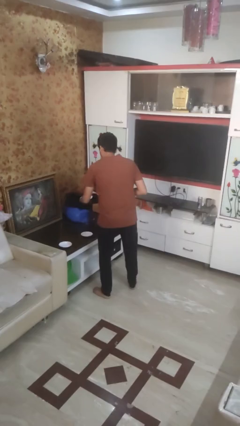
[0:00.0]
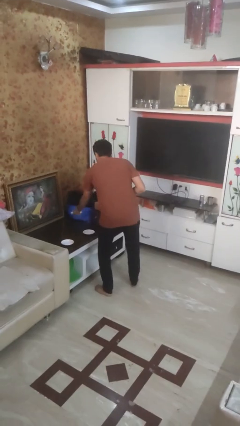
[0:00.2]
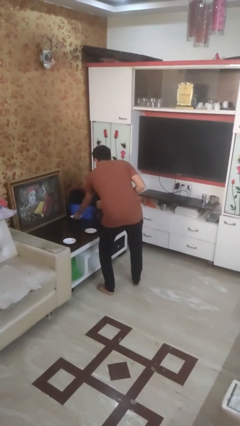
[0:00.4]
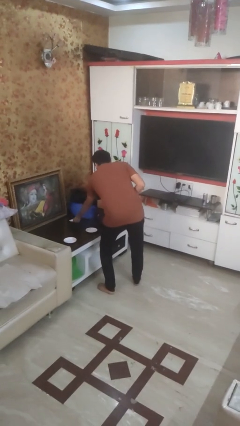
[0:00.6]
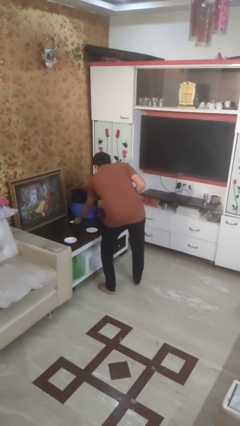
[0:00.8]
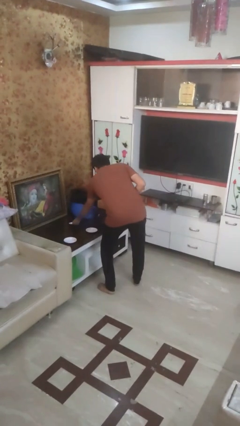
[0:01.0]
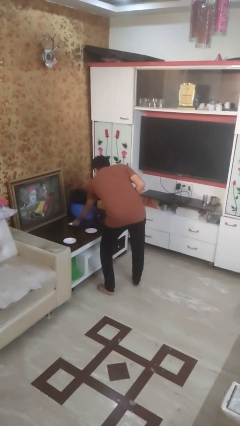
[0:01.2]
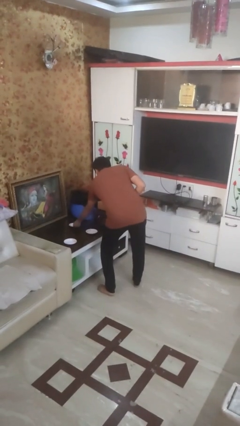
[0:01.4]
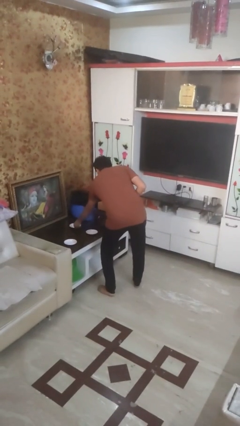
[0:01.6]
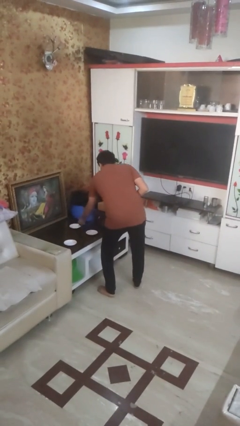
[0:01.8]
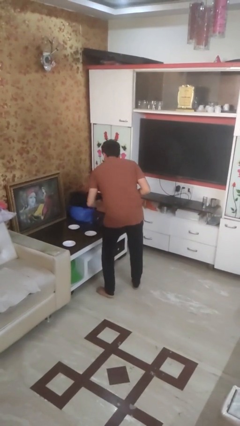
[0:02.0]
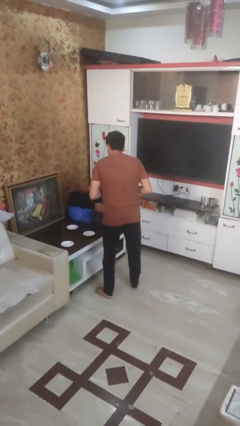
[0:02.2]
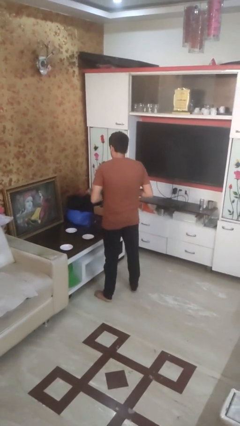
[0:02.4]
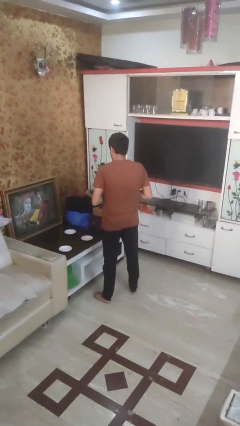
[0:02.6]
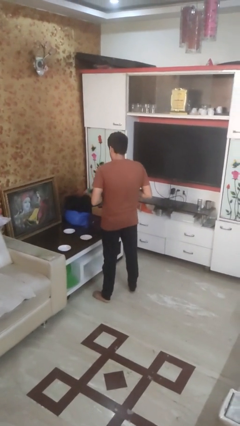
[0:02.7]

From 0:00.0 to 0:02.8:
person sets table

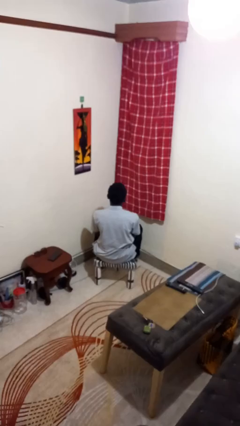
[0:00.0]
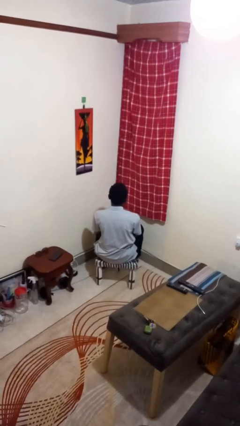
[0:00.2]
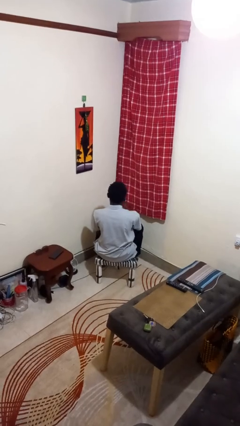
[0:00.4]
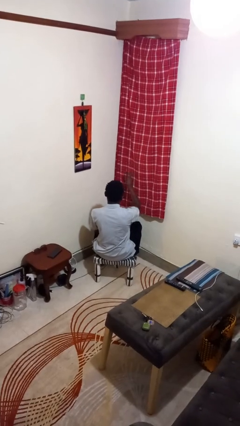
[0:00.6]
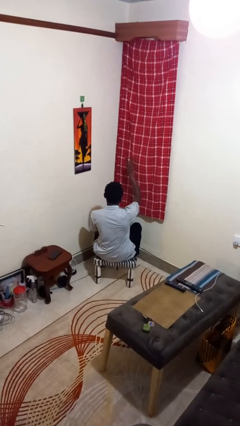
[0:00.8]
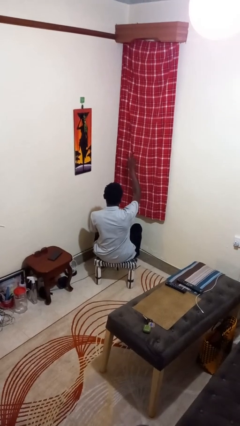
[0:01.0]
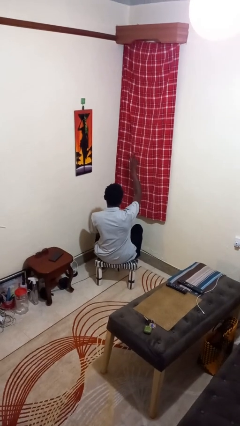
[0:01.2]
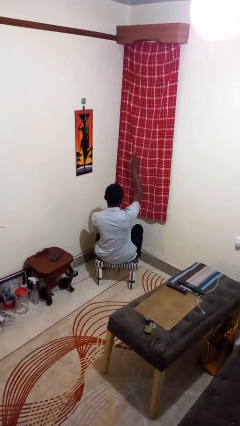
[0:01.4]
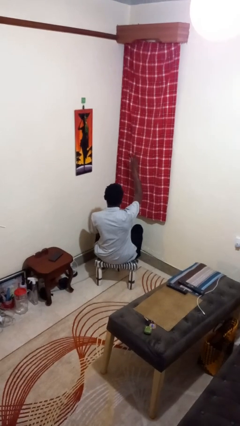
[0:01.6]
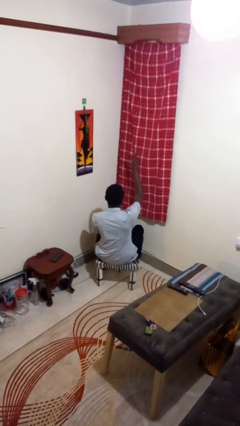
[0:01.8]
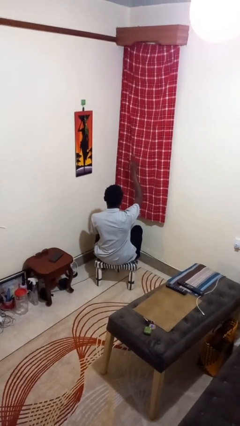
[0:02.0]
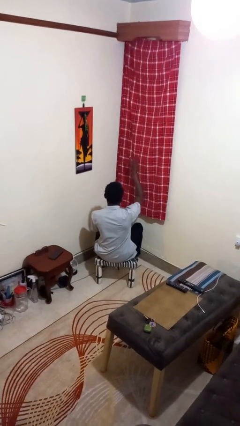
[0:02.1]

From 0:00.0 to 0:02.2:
person gestures peace

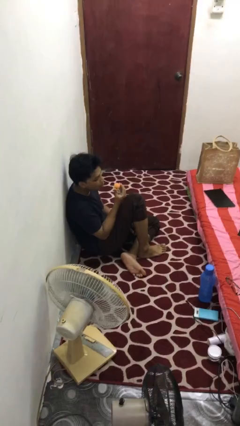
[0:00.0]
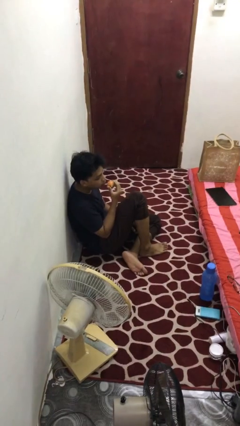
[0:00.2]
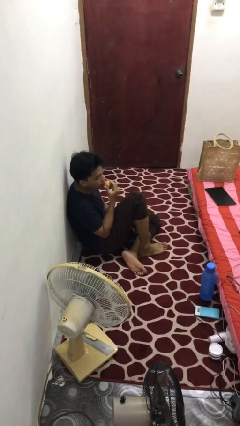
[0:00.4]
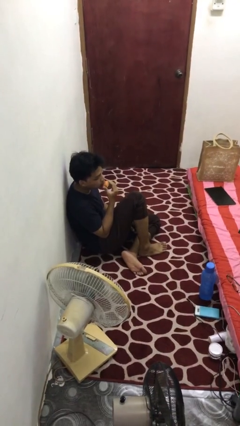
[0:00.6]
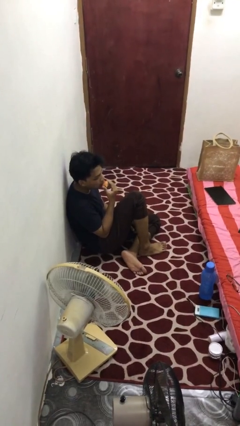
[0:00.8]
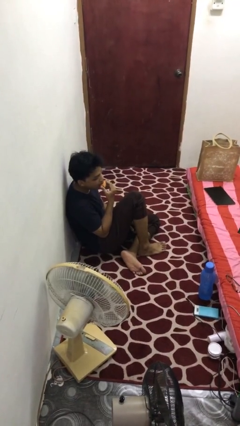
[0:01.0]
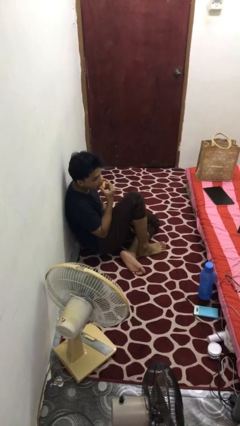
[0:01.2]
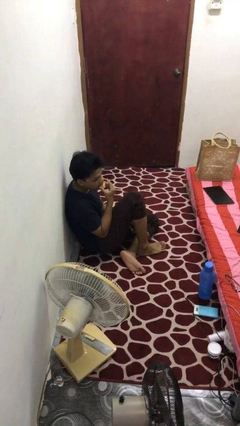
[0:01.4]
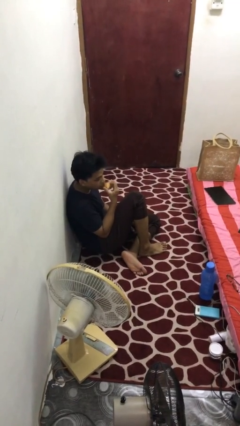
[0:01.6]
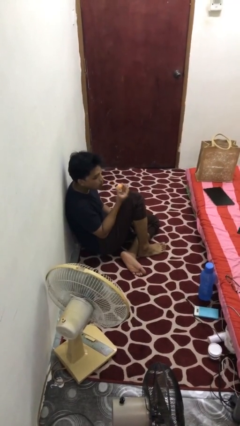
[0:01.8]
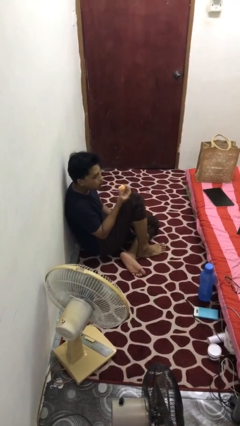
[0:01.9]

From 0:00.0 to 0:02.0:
person eats apple

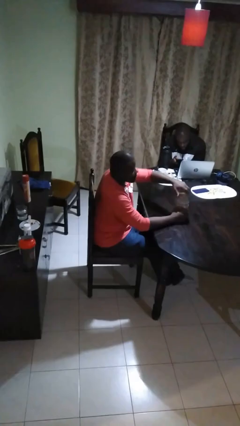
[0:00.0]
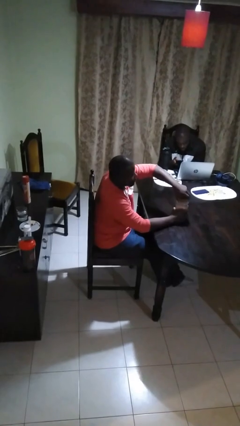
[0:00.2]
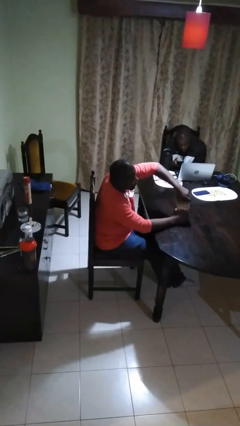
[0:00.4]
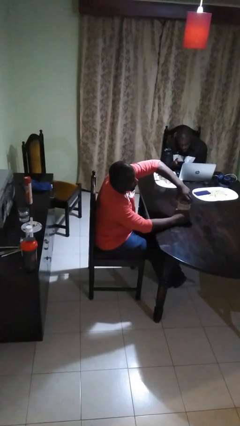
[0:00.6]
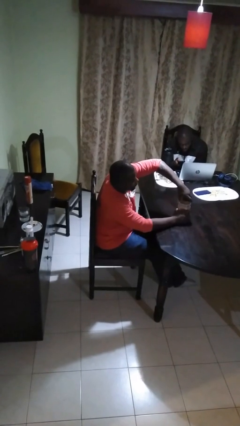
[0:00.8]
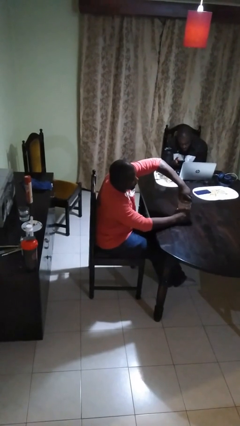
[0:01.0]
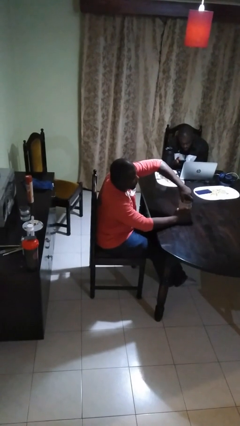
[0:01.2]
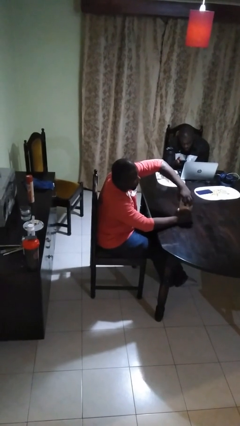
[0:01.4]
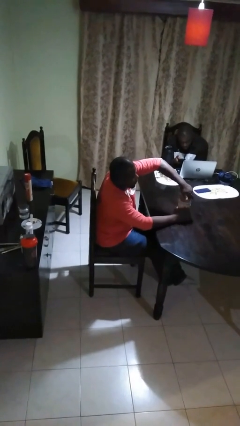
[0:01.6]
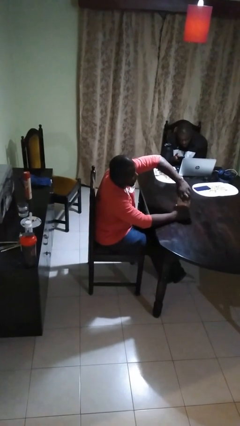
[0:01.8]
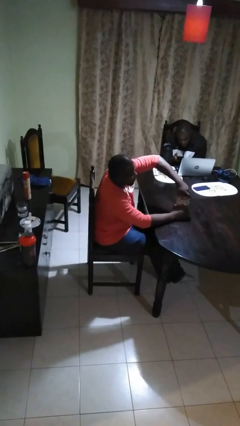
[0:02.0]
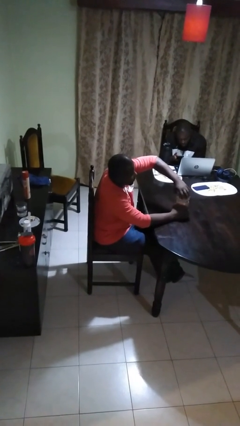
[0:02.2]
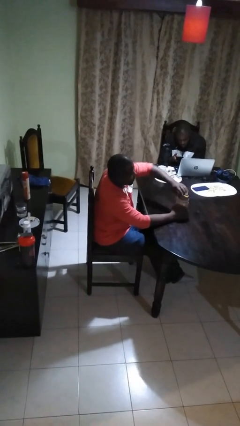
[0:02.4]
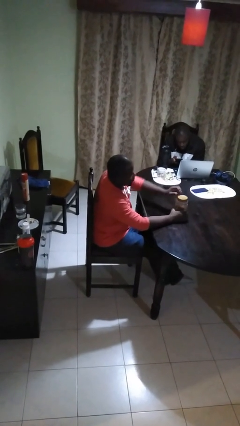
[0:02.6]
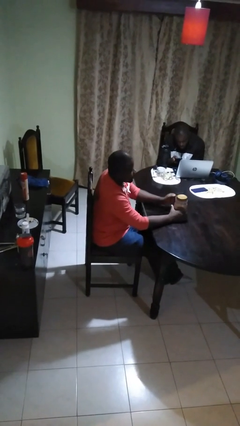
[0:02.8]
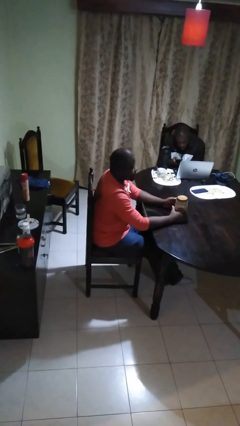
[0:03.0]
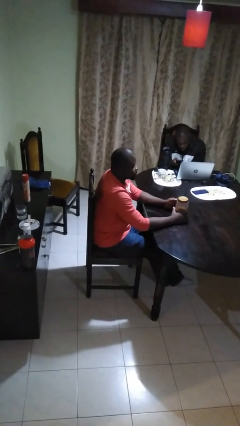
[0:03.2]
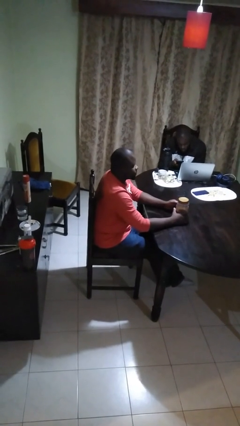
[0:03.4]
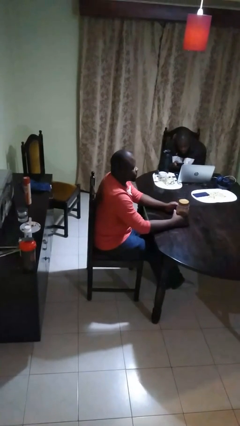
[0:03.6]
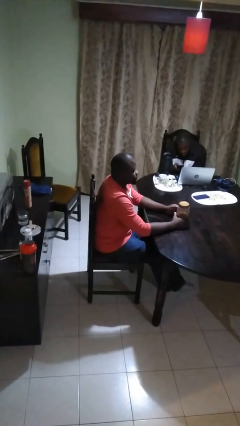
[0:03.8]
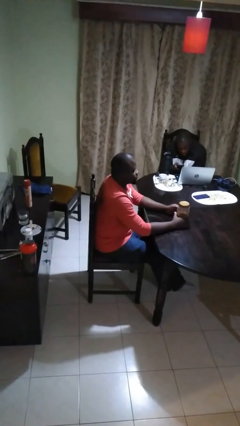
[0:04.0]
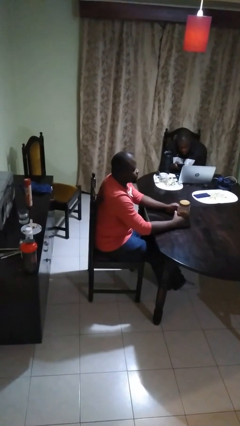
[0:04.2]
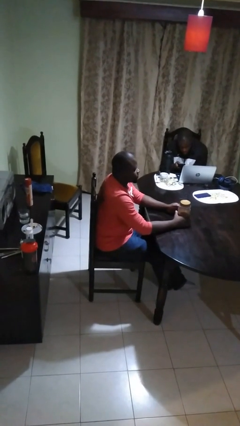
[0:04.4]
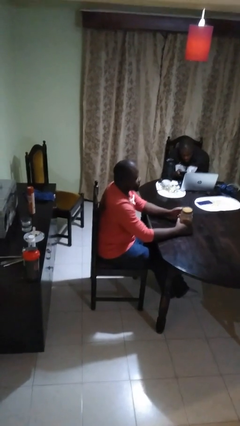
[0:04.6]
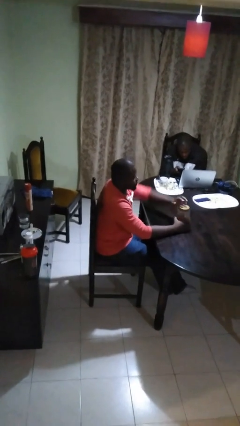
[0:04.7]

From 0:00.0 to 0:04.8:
person closes jar

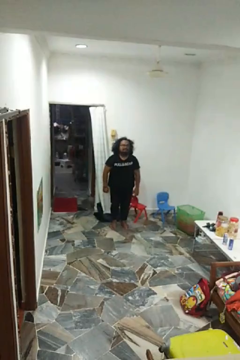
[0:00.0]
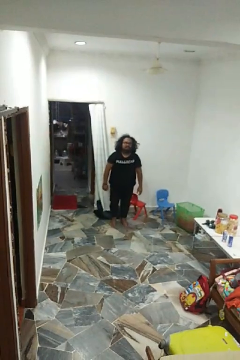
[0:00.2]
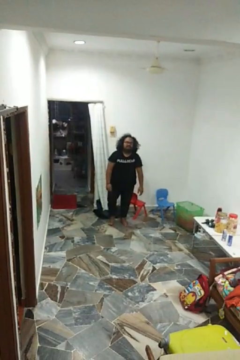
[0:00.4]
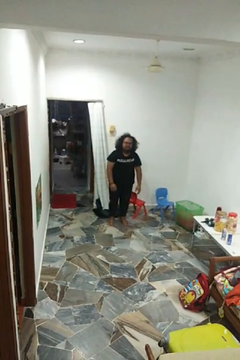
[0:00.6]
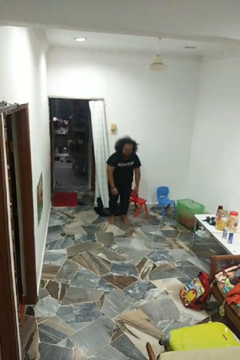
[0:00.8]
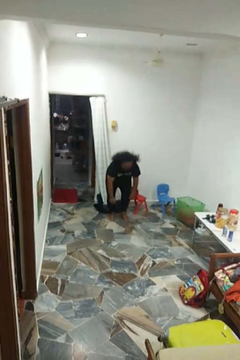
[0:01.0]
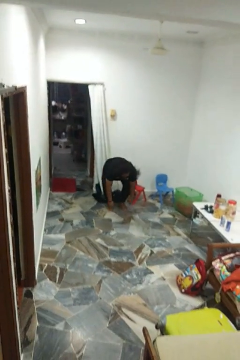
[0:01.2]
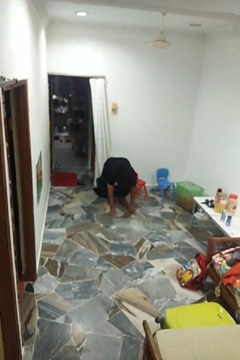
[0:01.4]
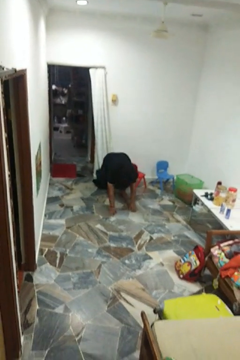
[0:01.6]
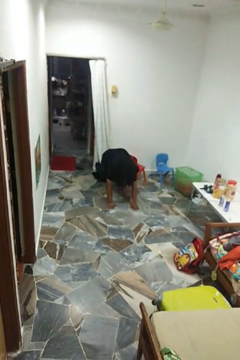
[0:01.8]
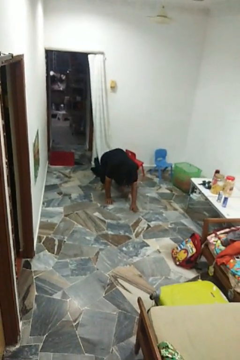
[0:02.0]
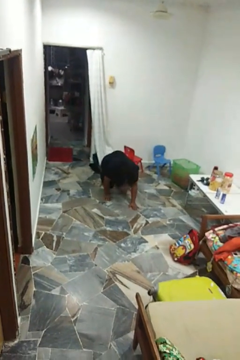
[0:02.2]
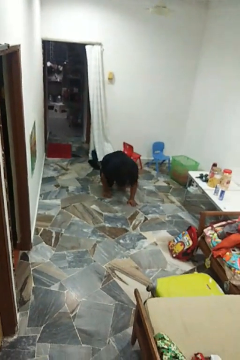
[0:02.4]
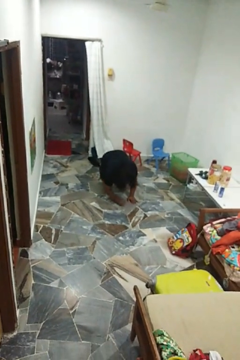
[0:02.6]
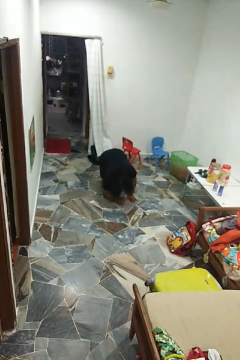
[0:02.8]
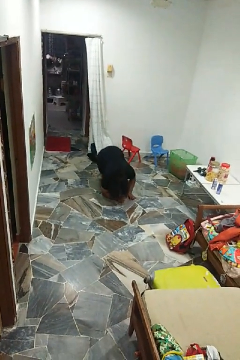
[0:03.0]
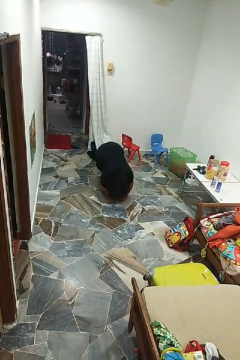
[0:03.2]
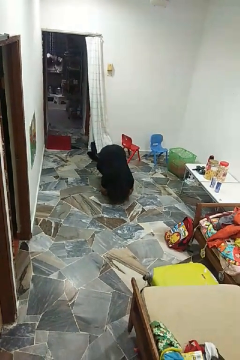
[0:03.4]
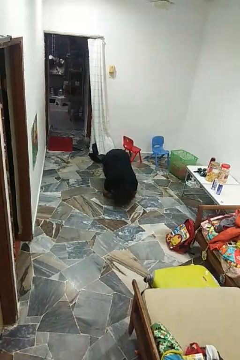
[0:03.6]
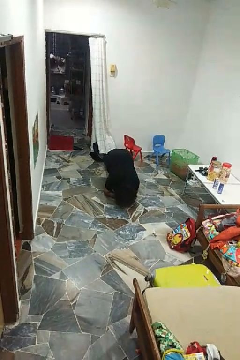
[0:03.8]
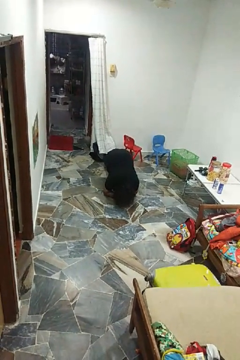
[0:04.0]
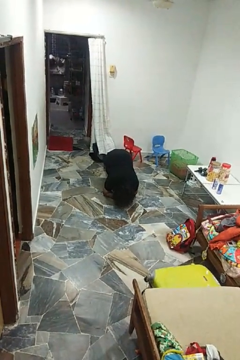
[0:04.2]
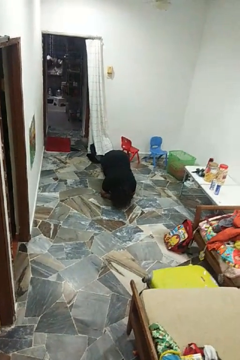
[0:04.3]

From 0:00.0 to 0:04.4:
person exercises with plank

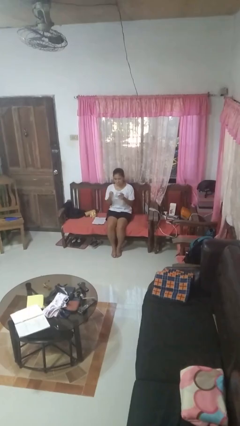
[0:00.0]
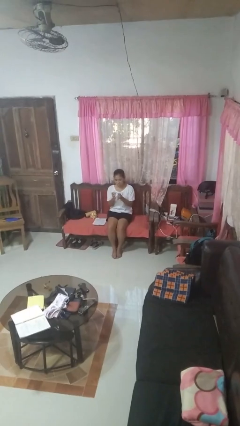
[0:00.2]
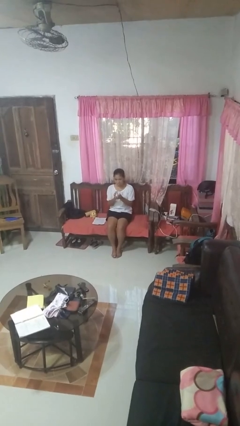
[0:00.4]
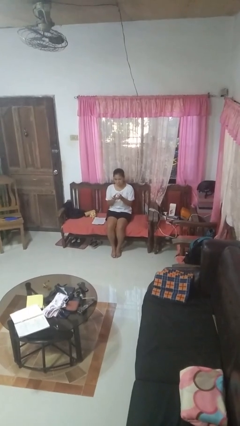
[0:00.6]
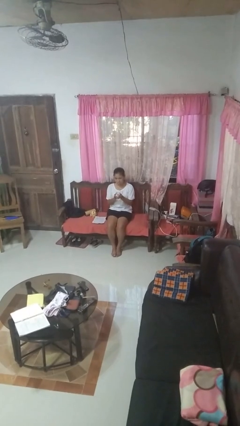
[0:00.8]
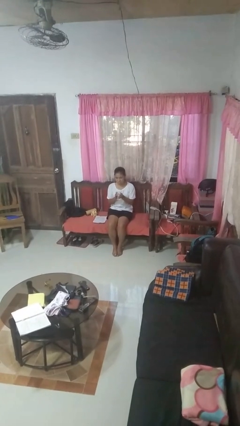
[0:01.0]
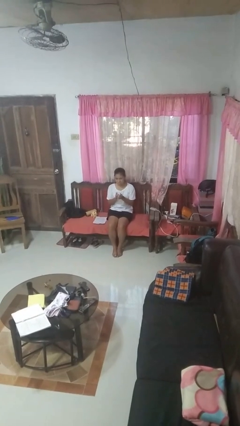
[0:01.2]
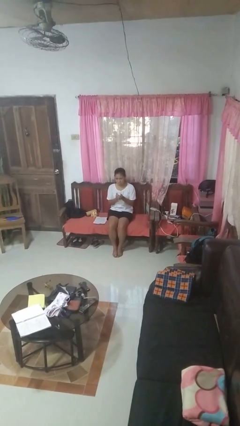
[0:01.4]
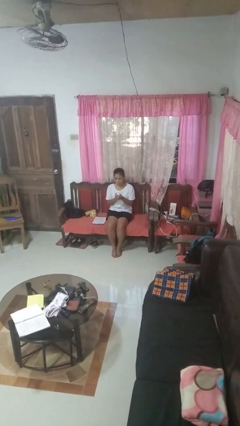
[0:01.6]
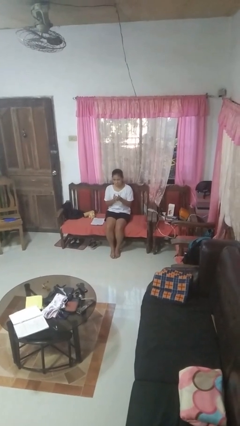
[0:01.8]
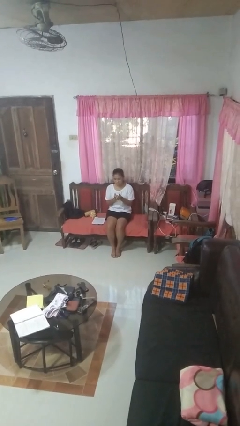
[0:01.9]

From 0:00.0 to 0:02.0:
person crumples paper
